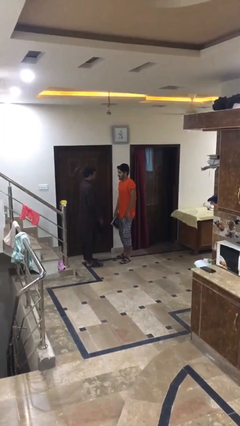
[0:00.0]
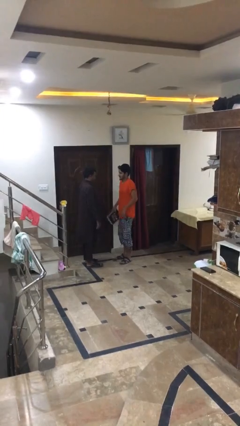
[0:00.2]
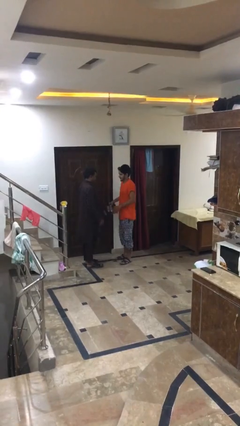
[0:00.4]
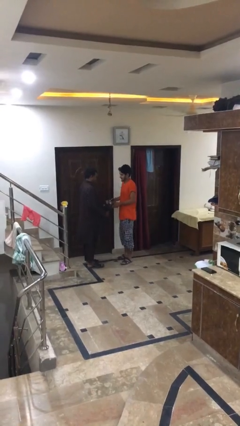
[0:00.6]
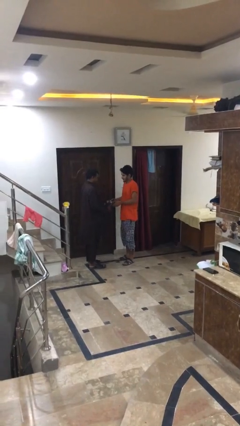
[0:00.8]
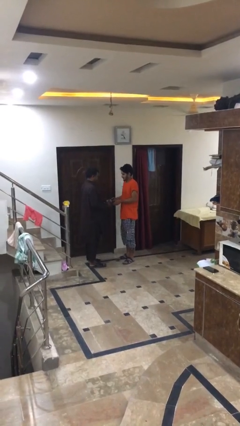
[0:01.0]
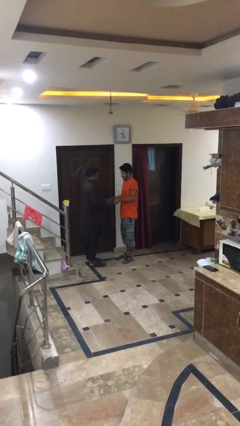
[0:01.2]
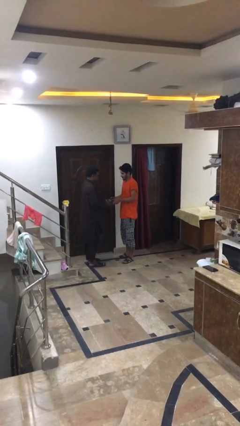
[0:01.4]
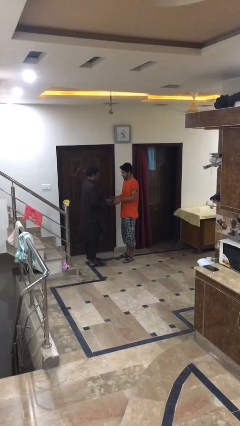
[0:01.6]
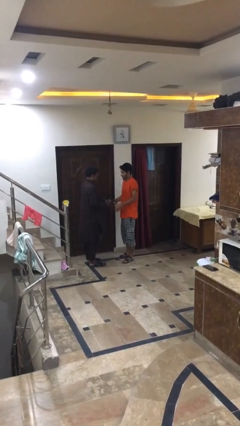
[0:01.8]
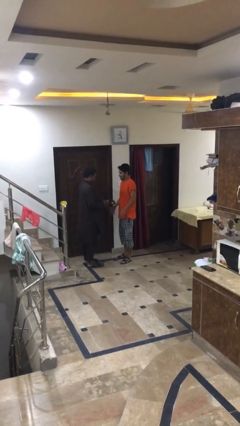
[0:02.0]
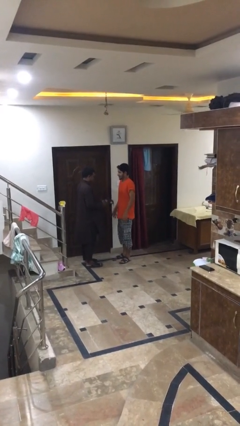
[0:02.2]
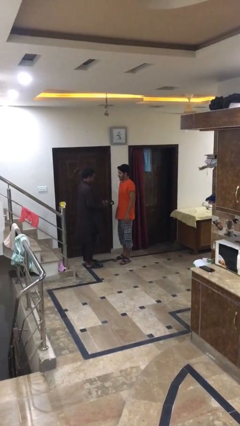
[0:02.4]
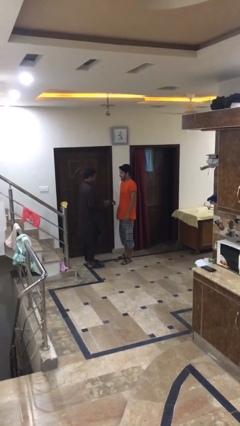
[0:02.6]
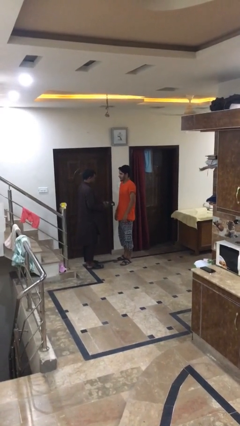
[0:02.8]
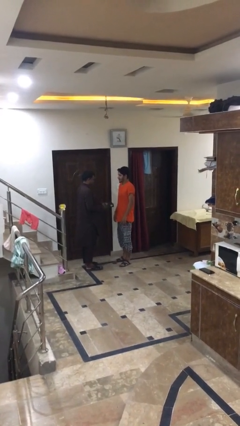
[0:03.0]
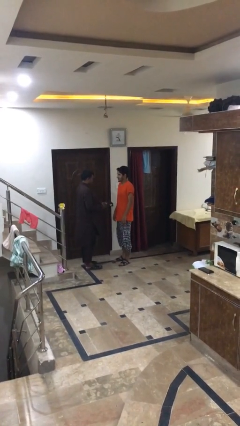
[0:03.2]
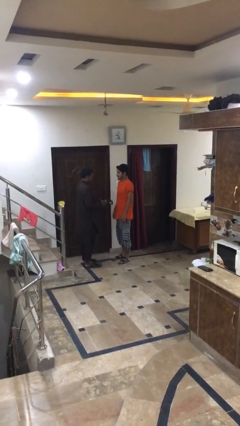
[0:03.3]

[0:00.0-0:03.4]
person transfers object to person

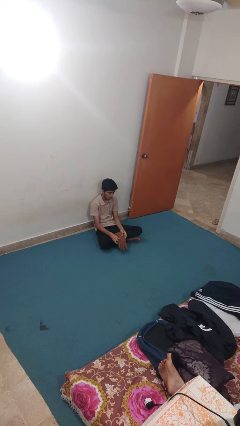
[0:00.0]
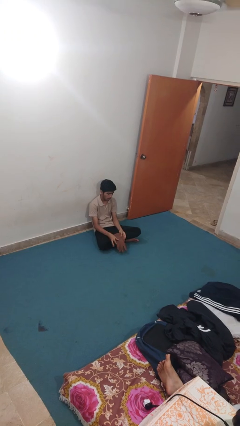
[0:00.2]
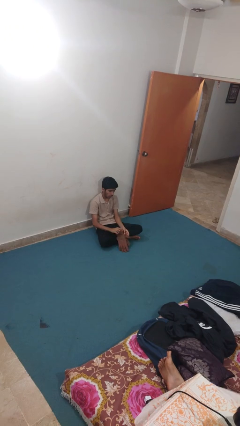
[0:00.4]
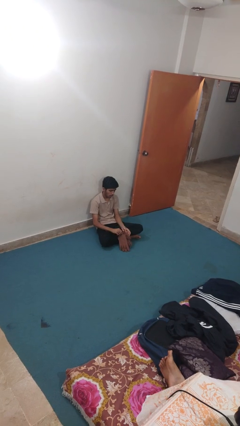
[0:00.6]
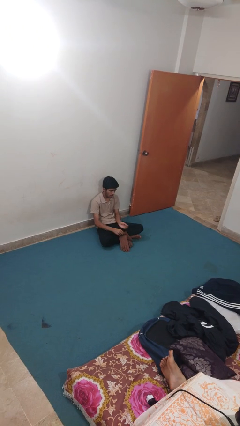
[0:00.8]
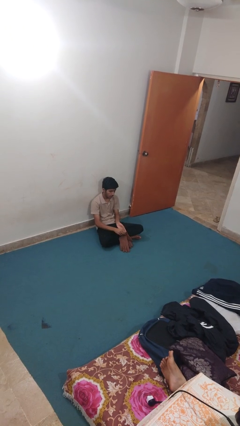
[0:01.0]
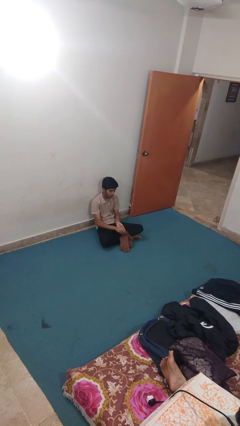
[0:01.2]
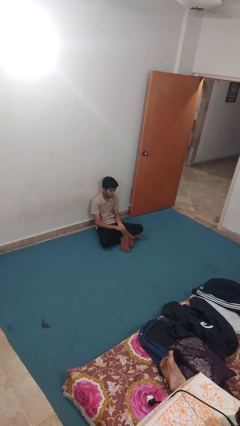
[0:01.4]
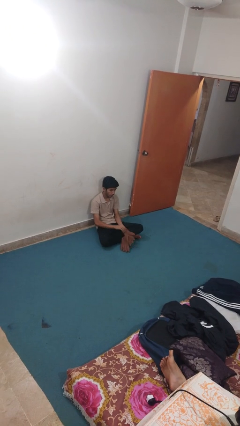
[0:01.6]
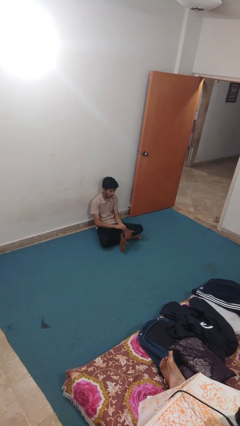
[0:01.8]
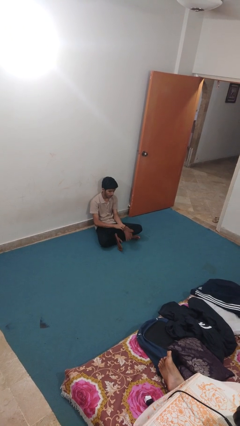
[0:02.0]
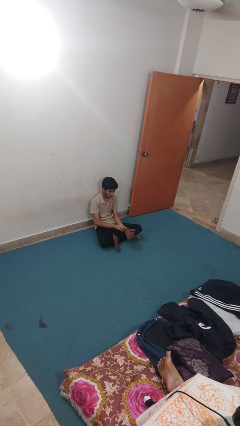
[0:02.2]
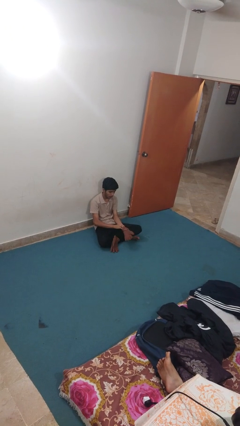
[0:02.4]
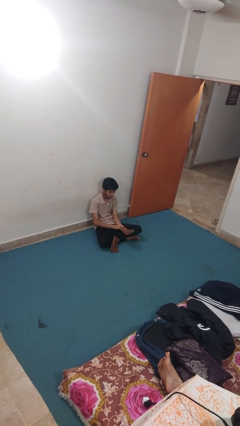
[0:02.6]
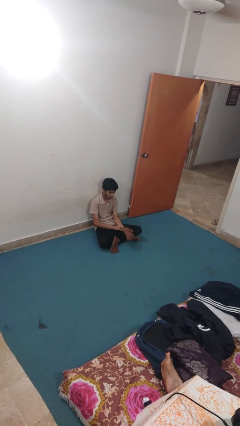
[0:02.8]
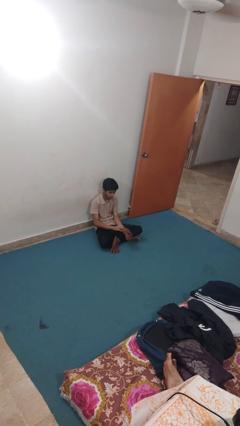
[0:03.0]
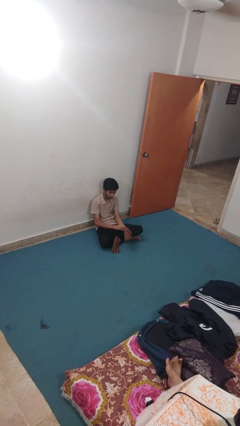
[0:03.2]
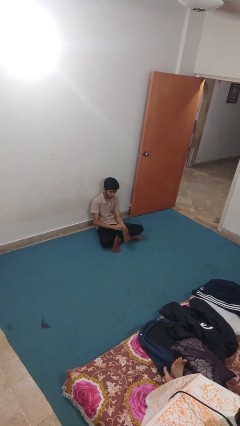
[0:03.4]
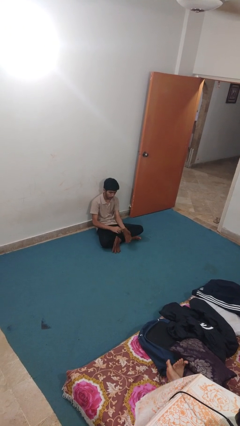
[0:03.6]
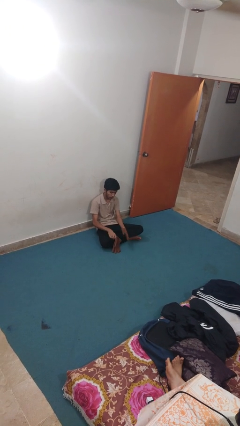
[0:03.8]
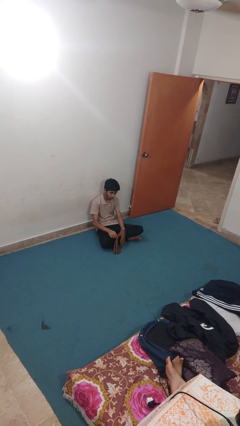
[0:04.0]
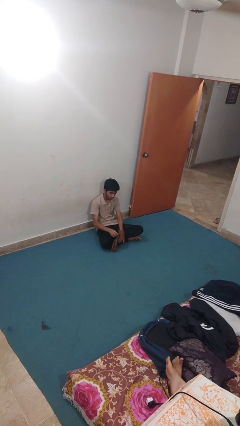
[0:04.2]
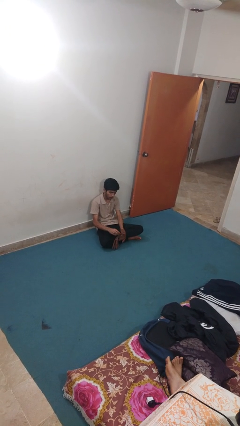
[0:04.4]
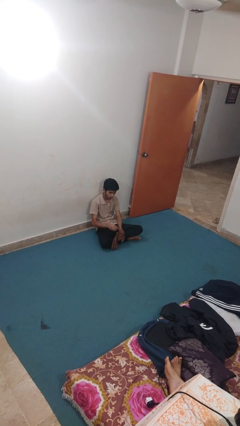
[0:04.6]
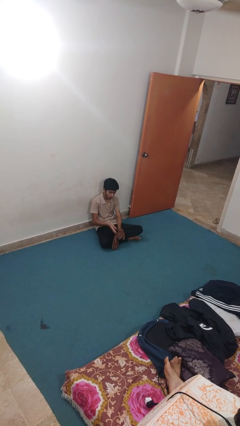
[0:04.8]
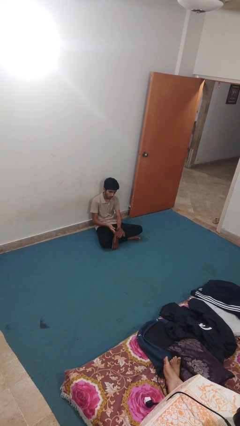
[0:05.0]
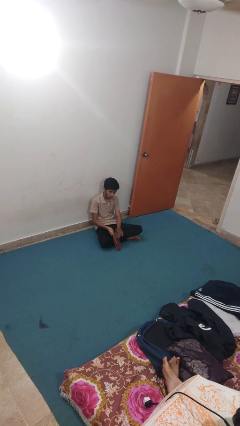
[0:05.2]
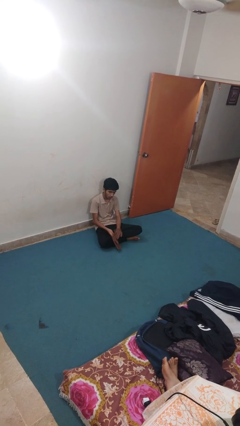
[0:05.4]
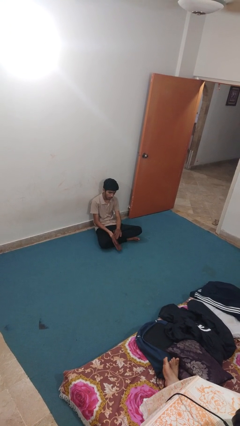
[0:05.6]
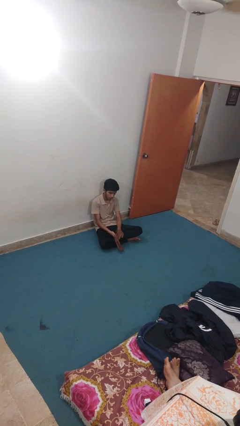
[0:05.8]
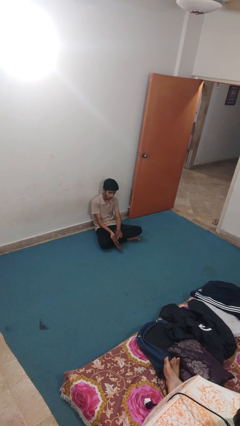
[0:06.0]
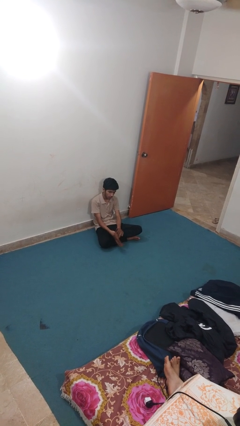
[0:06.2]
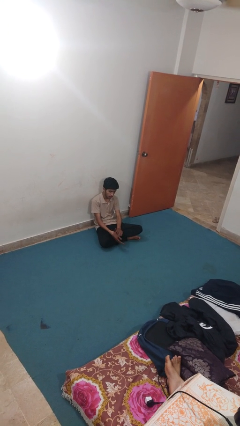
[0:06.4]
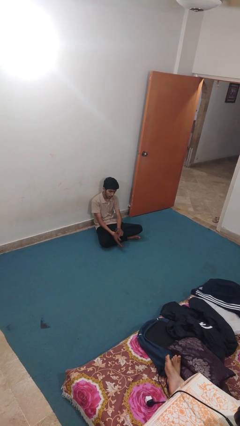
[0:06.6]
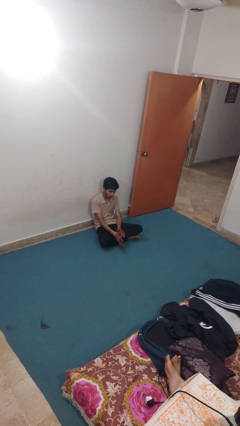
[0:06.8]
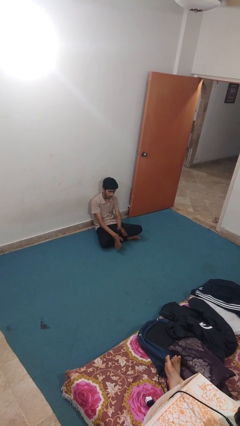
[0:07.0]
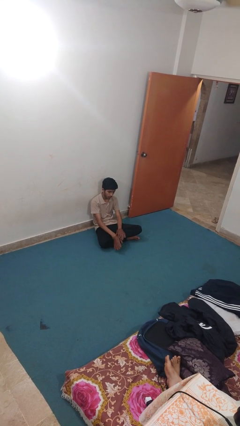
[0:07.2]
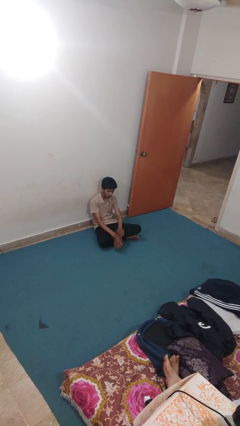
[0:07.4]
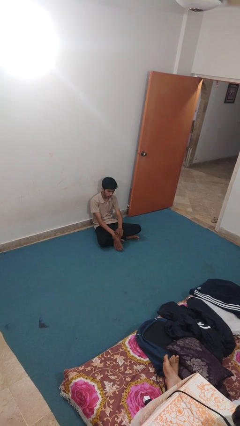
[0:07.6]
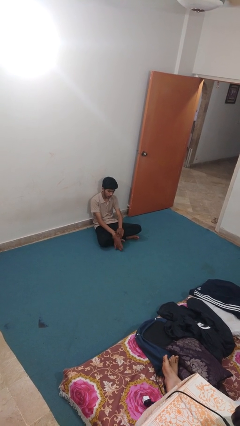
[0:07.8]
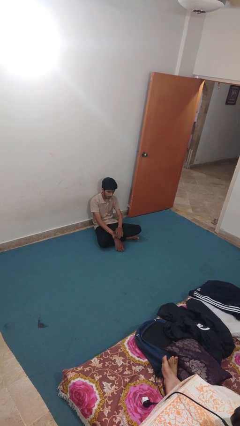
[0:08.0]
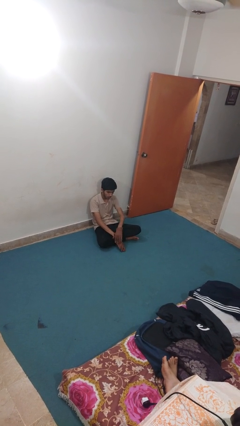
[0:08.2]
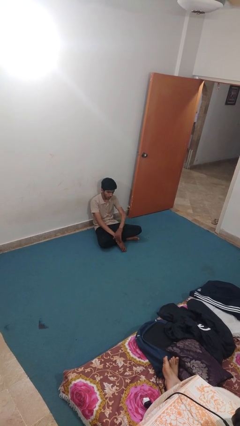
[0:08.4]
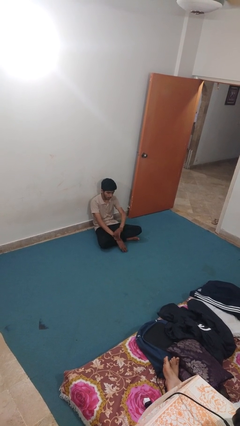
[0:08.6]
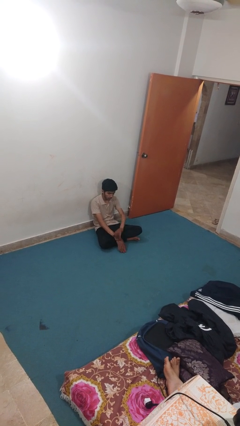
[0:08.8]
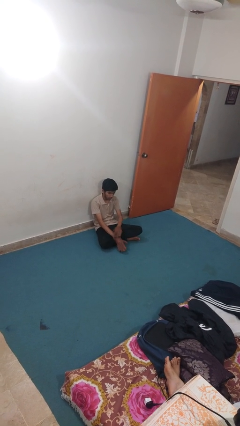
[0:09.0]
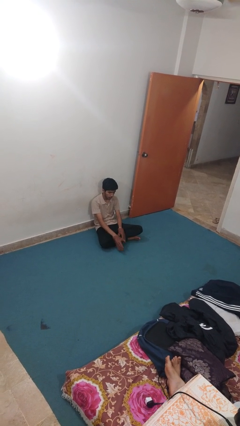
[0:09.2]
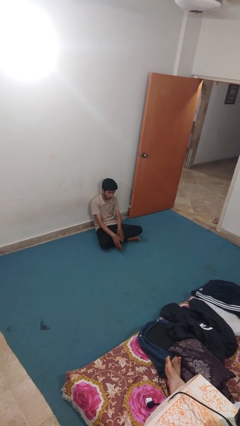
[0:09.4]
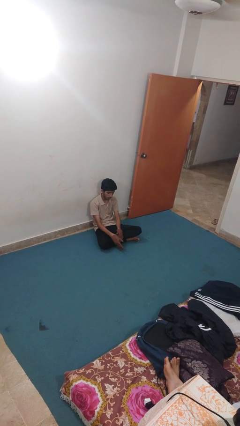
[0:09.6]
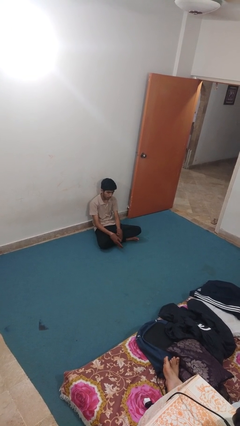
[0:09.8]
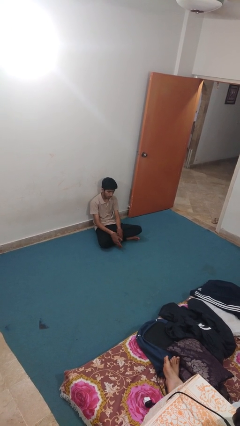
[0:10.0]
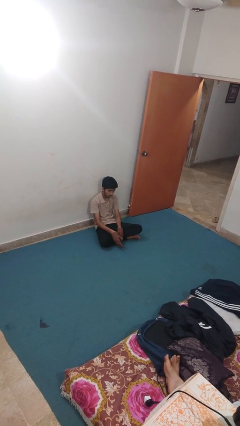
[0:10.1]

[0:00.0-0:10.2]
person puts on gloves

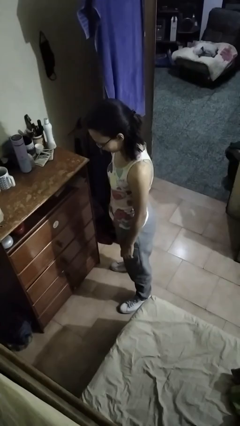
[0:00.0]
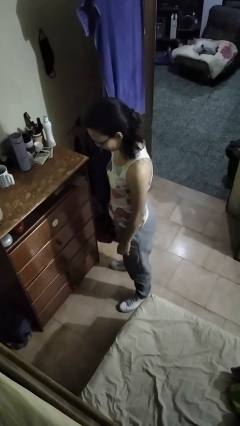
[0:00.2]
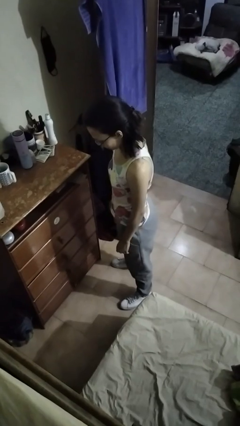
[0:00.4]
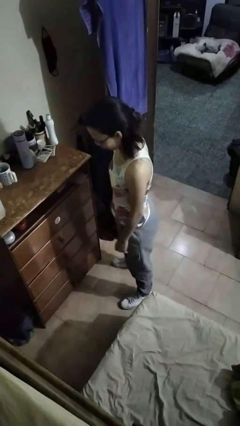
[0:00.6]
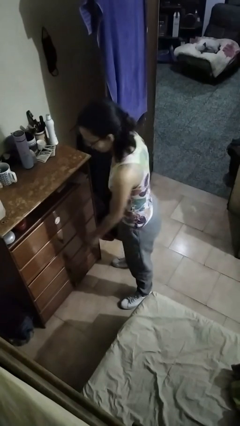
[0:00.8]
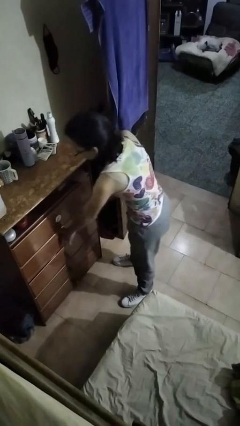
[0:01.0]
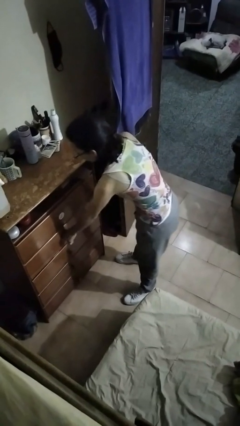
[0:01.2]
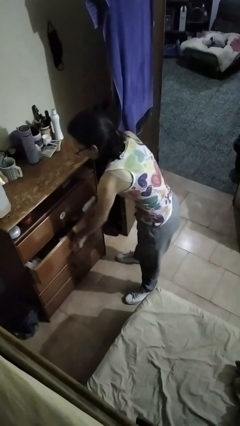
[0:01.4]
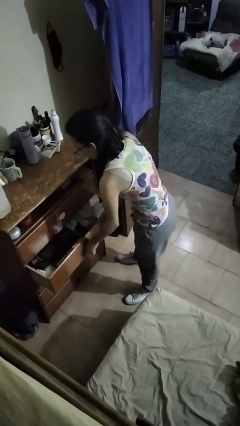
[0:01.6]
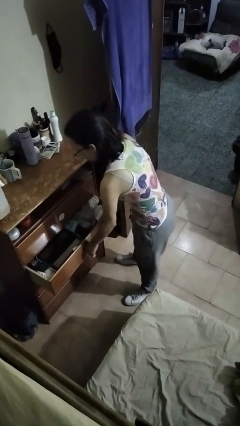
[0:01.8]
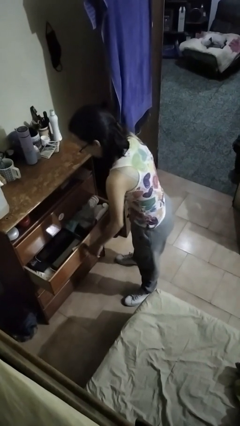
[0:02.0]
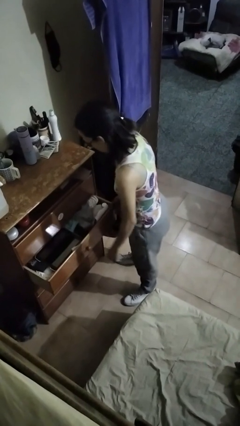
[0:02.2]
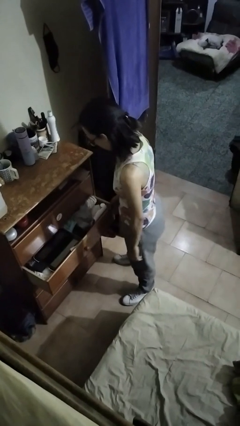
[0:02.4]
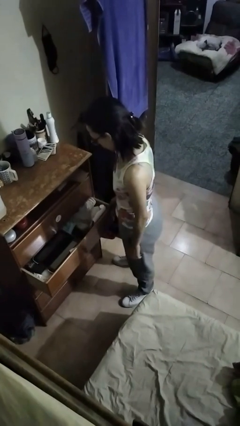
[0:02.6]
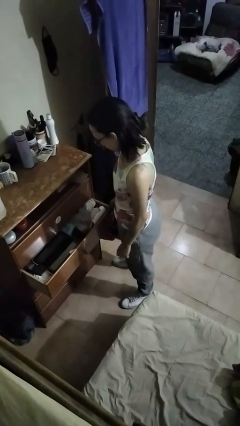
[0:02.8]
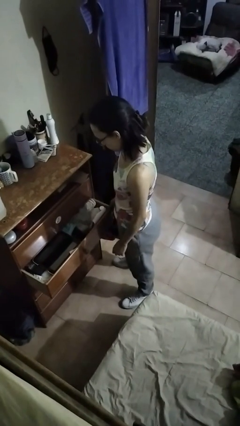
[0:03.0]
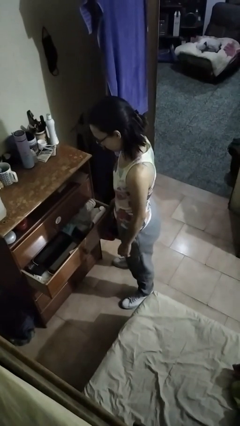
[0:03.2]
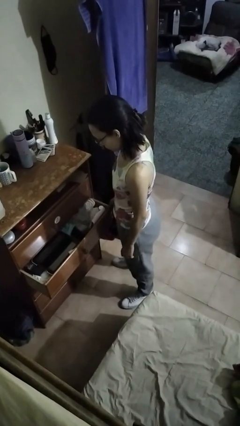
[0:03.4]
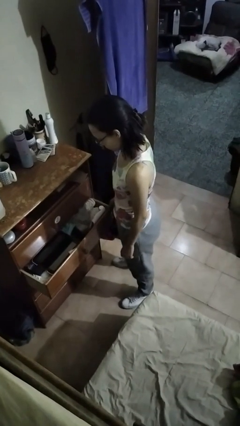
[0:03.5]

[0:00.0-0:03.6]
person opens dresser drawer

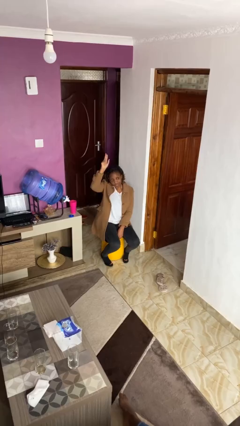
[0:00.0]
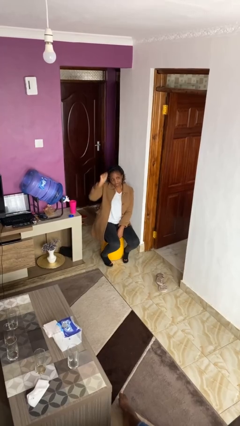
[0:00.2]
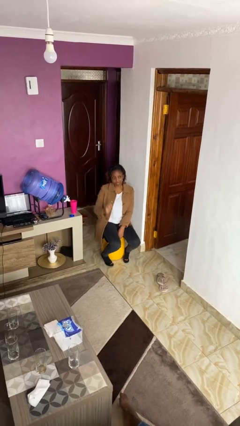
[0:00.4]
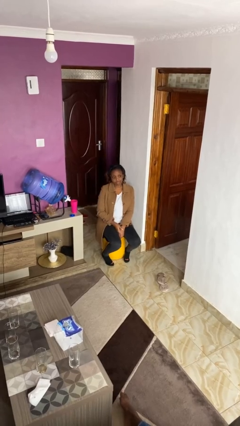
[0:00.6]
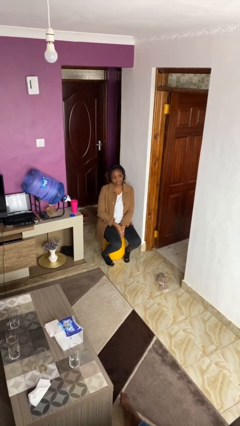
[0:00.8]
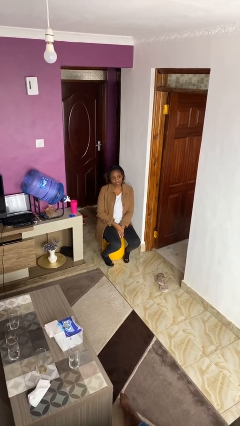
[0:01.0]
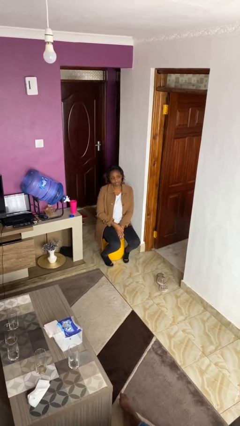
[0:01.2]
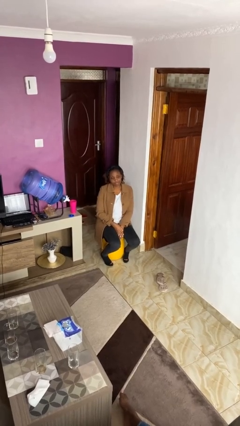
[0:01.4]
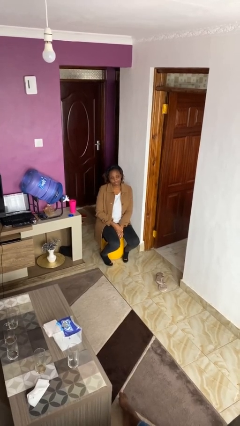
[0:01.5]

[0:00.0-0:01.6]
person gestures lower hand
